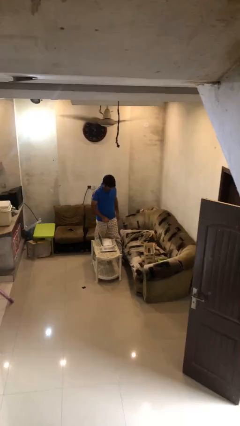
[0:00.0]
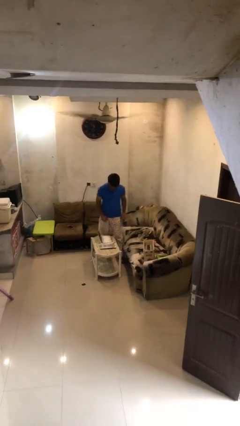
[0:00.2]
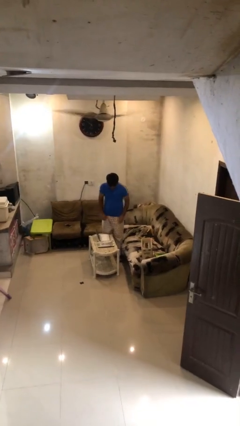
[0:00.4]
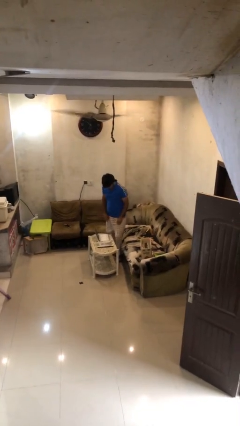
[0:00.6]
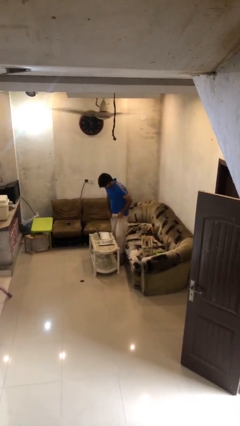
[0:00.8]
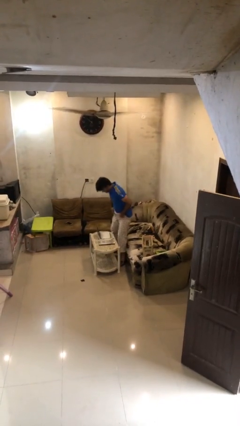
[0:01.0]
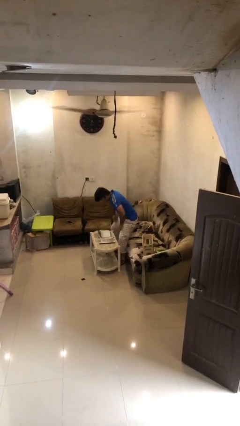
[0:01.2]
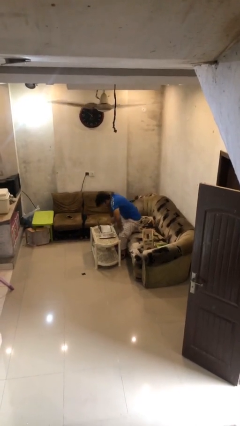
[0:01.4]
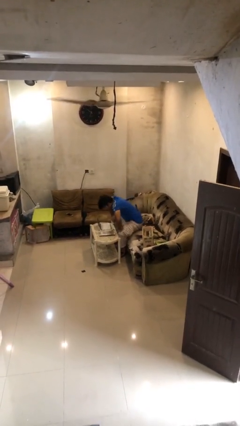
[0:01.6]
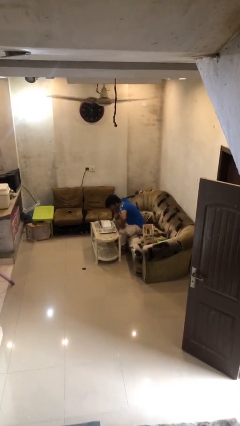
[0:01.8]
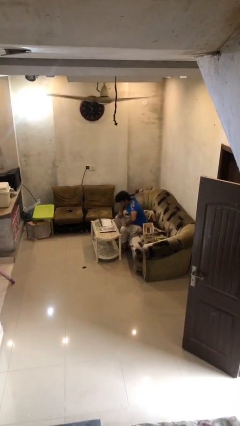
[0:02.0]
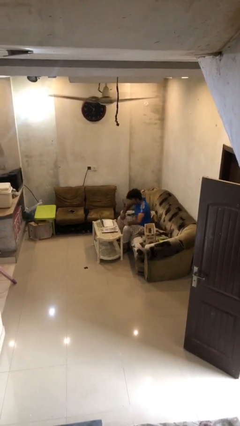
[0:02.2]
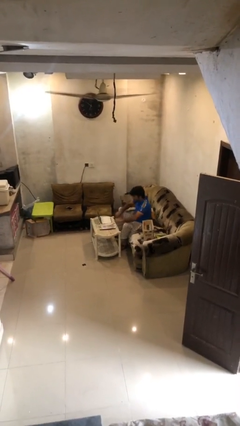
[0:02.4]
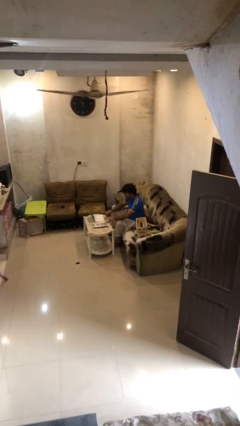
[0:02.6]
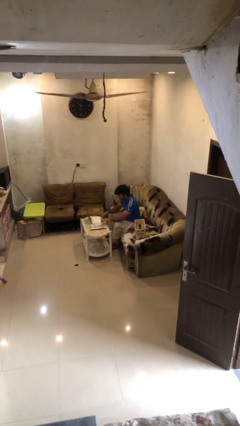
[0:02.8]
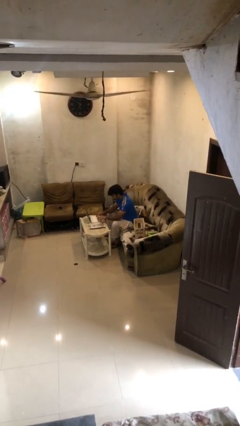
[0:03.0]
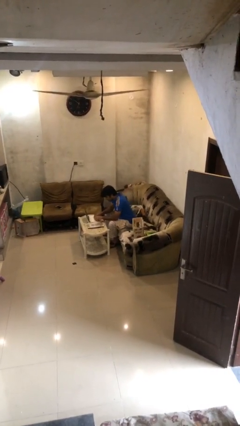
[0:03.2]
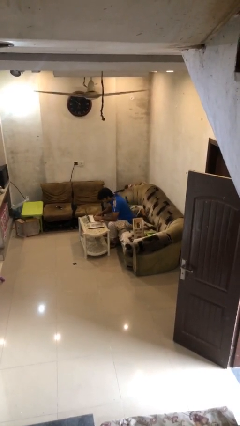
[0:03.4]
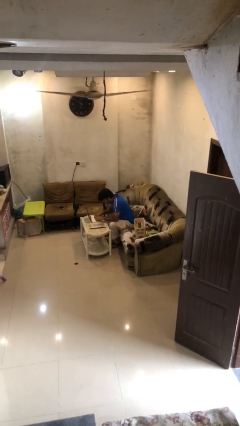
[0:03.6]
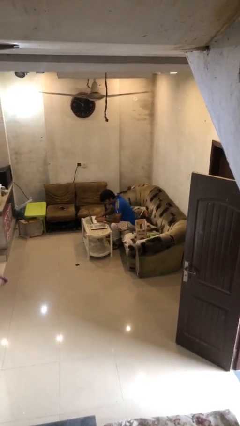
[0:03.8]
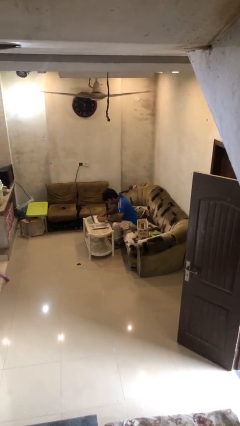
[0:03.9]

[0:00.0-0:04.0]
person sits down

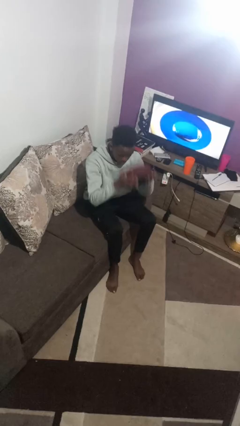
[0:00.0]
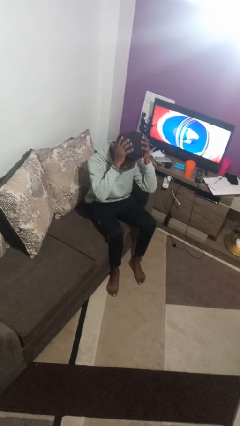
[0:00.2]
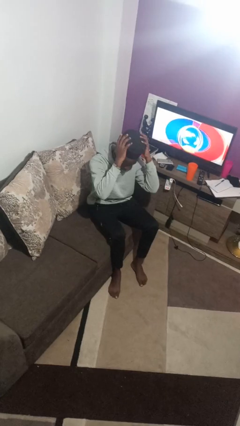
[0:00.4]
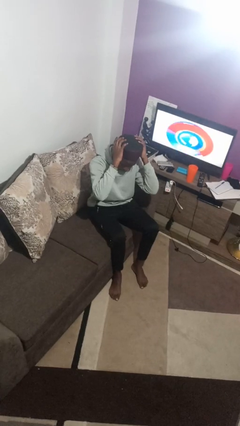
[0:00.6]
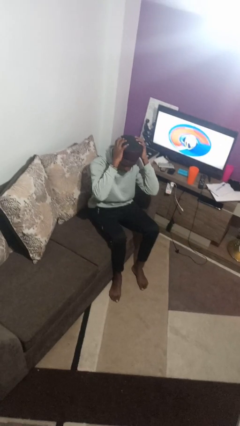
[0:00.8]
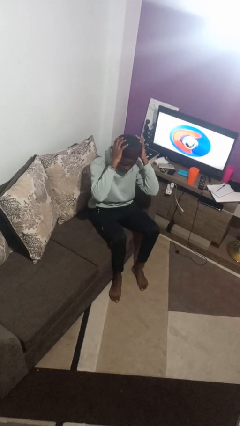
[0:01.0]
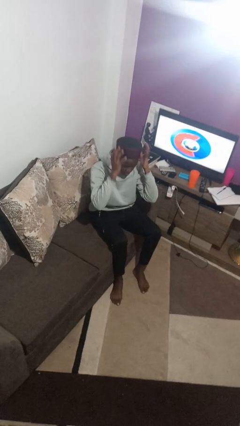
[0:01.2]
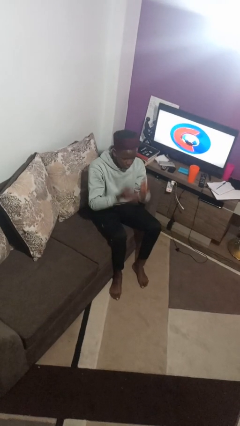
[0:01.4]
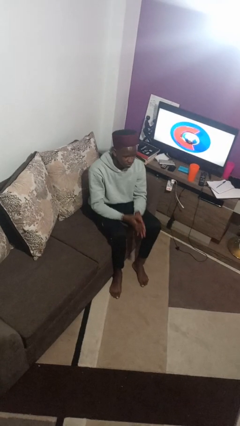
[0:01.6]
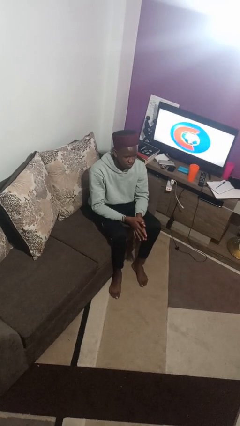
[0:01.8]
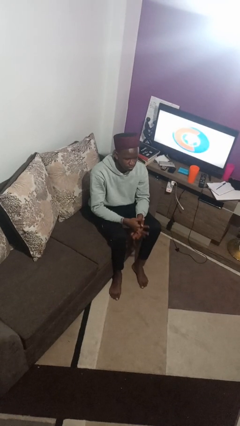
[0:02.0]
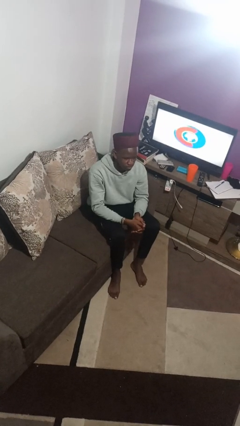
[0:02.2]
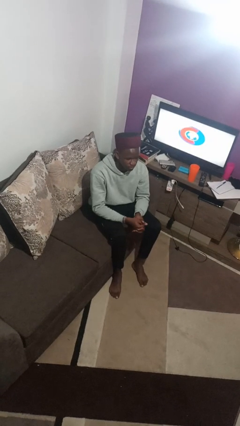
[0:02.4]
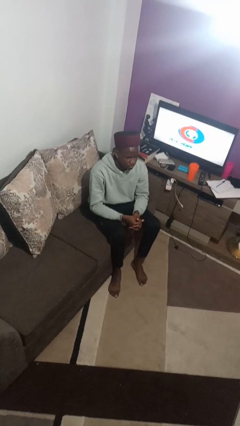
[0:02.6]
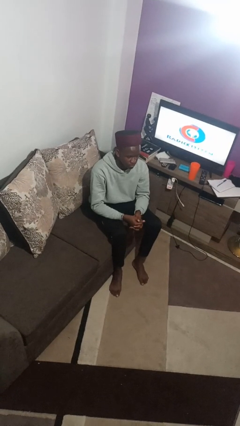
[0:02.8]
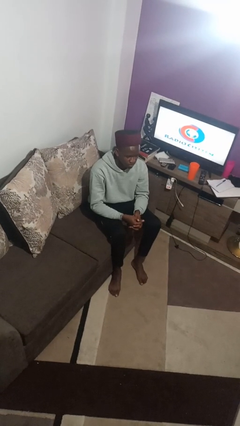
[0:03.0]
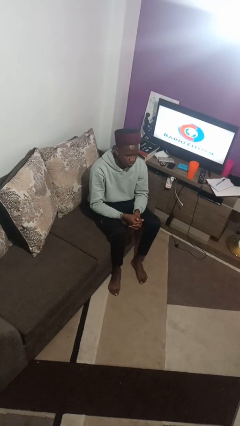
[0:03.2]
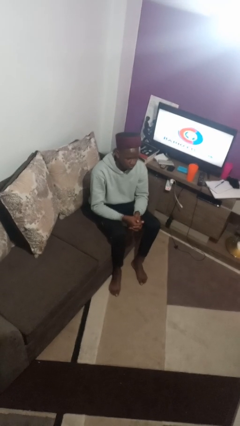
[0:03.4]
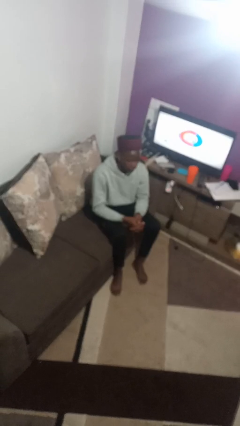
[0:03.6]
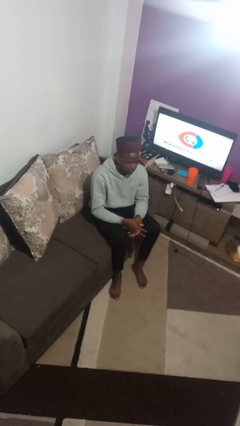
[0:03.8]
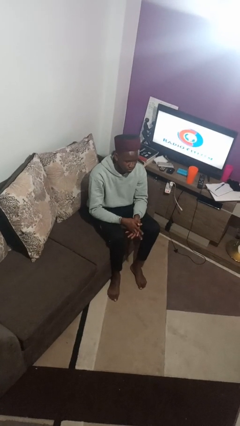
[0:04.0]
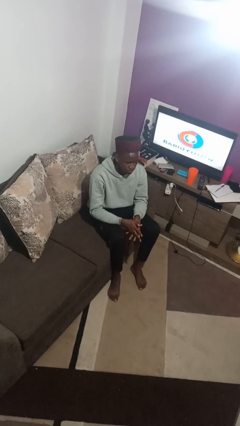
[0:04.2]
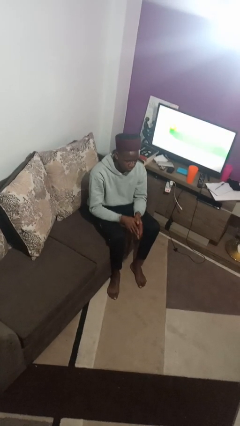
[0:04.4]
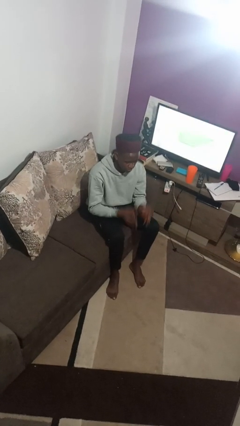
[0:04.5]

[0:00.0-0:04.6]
person puts on hat

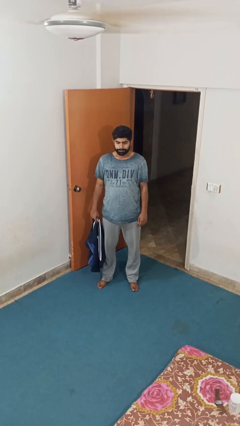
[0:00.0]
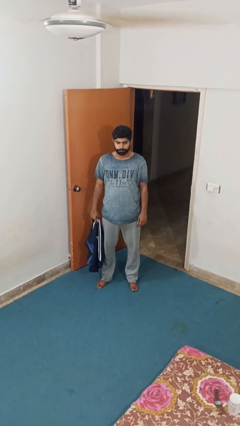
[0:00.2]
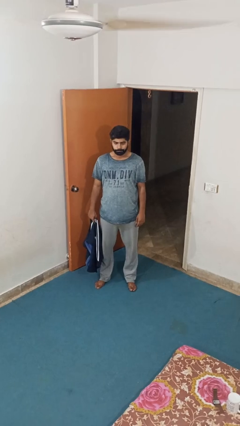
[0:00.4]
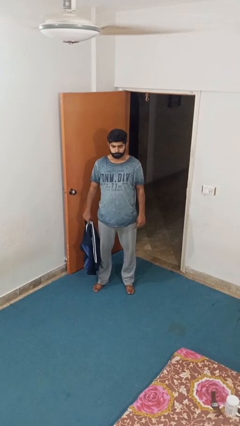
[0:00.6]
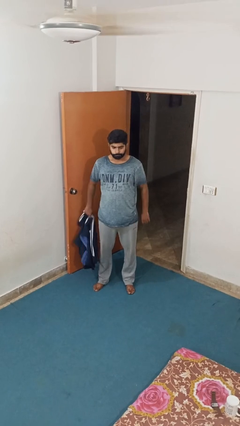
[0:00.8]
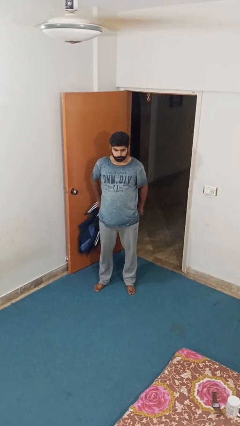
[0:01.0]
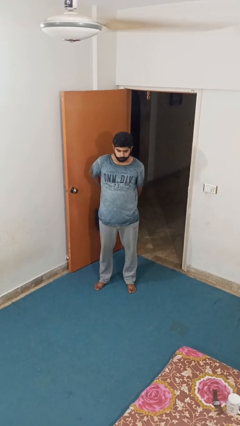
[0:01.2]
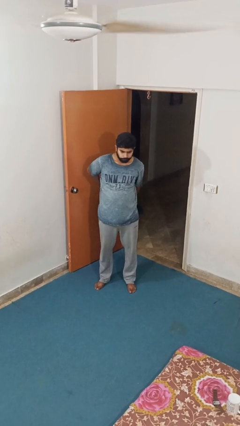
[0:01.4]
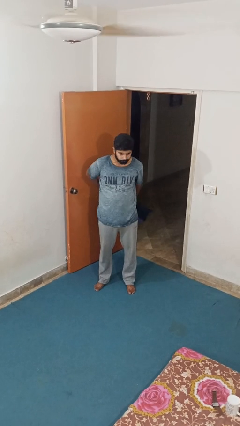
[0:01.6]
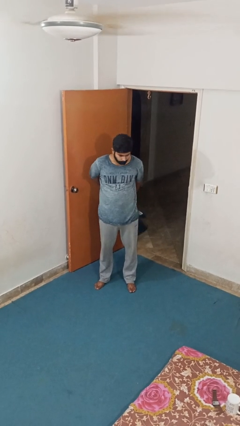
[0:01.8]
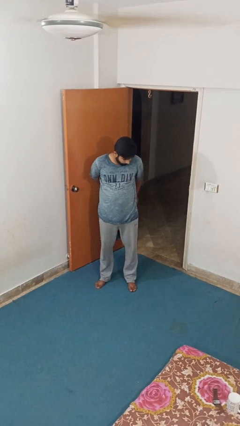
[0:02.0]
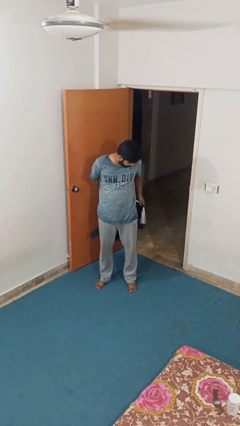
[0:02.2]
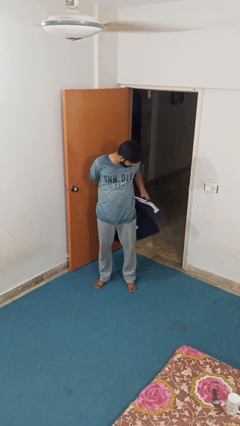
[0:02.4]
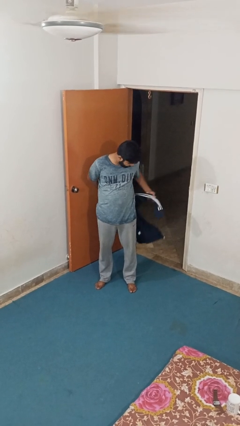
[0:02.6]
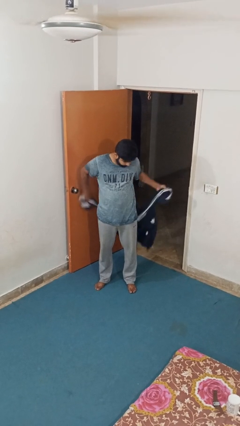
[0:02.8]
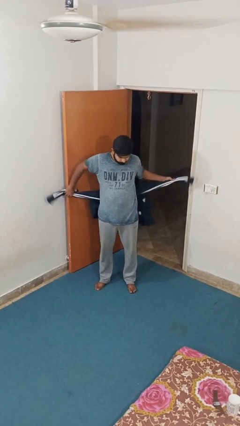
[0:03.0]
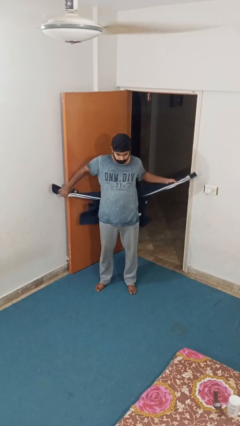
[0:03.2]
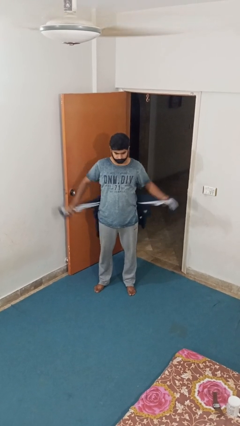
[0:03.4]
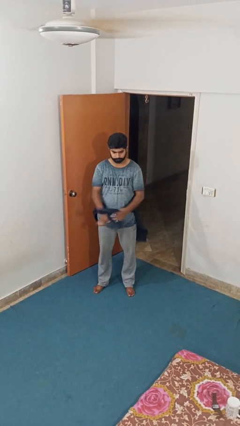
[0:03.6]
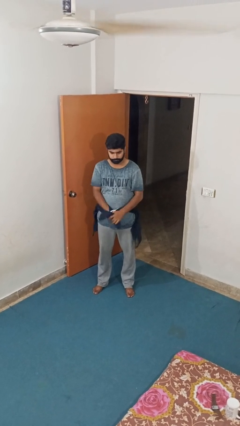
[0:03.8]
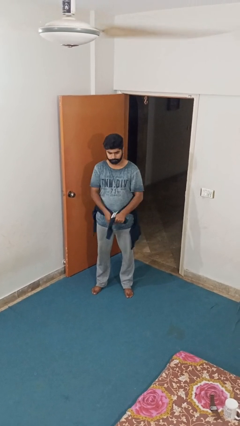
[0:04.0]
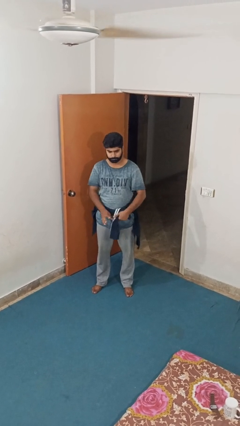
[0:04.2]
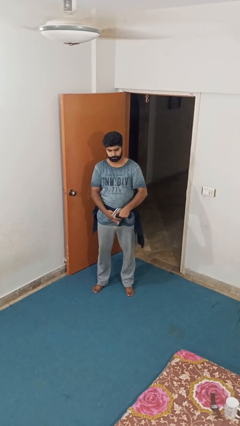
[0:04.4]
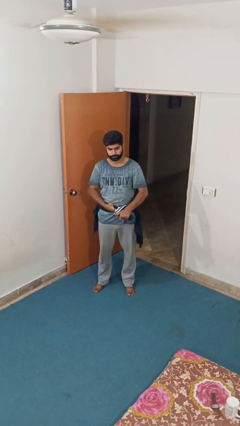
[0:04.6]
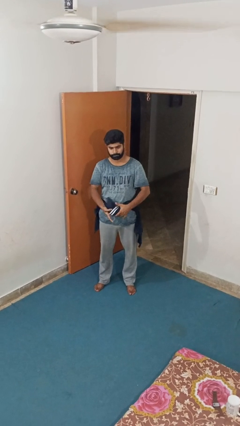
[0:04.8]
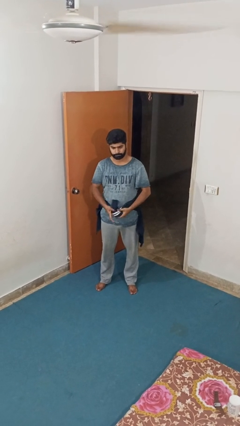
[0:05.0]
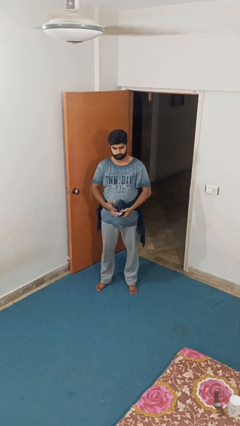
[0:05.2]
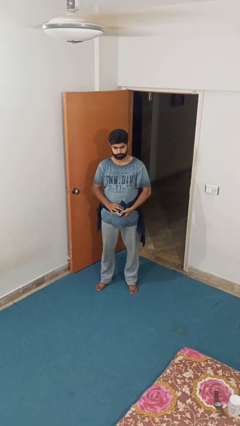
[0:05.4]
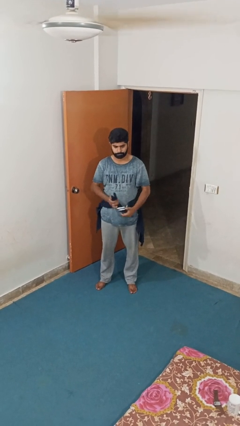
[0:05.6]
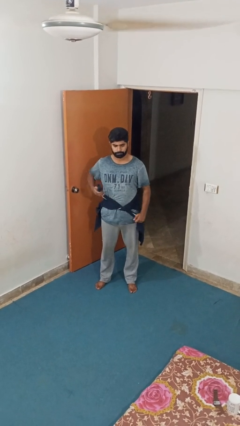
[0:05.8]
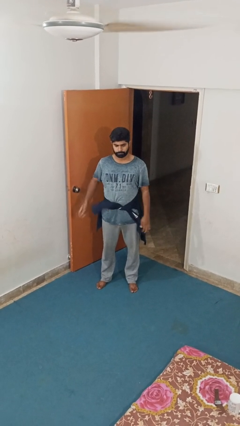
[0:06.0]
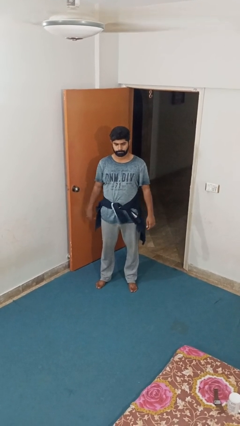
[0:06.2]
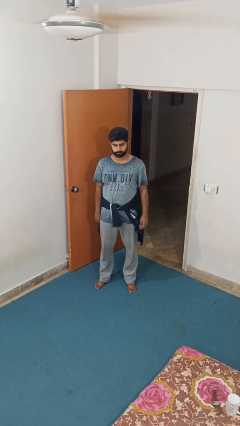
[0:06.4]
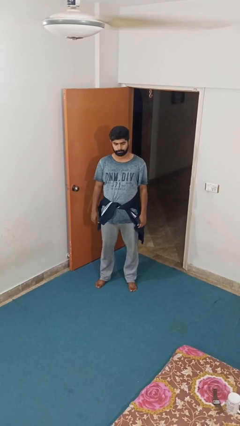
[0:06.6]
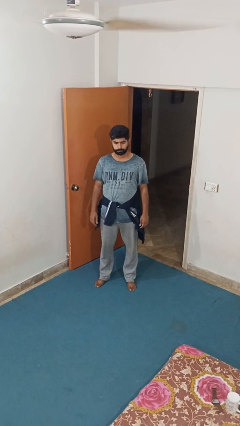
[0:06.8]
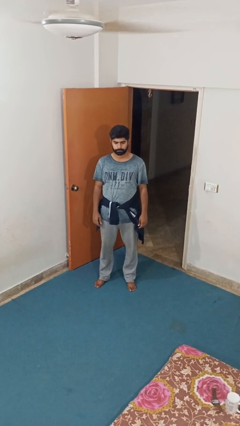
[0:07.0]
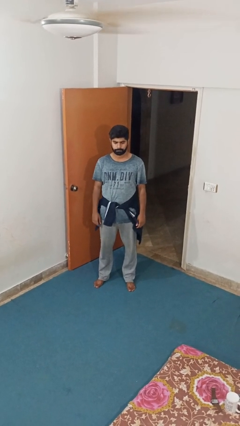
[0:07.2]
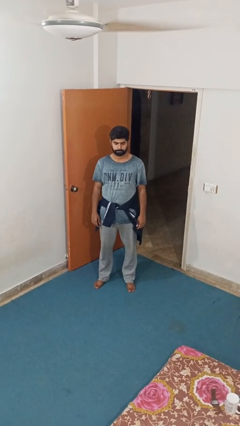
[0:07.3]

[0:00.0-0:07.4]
person ties jacket around waist

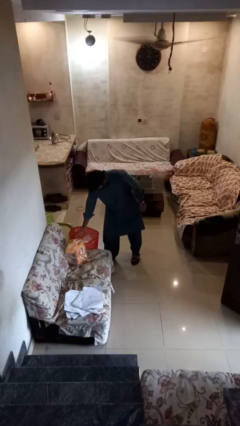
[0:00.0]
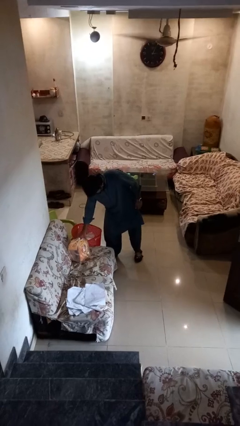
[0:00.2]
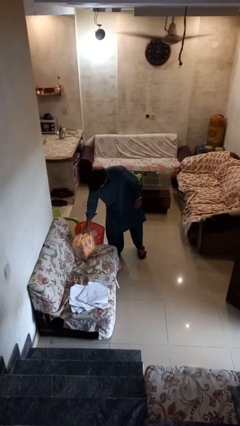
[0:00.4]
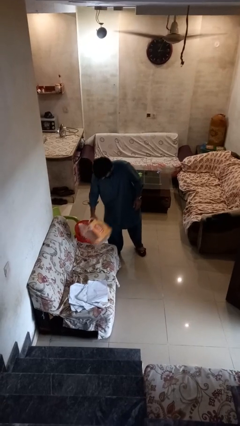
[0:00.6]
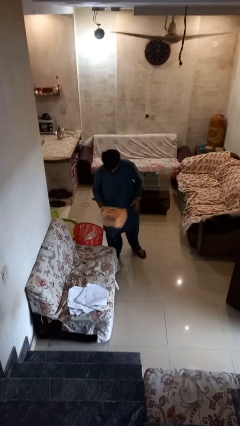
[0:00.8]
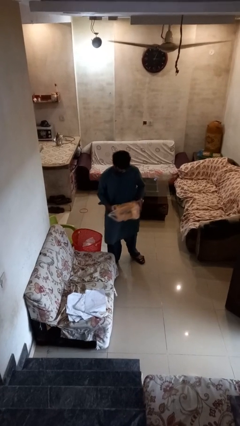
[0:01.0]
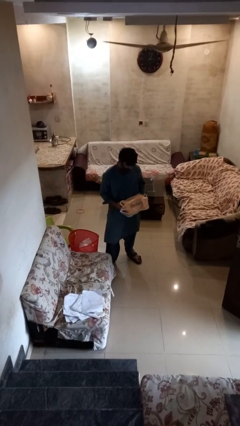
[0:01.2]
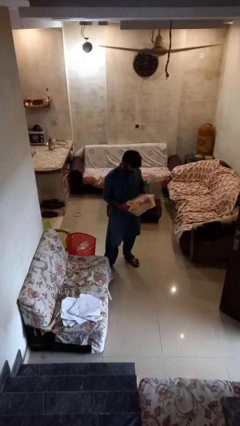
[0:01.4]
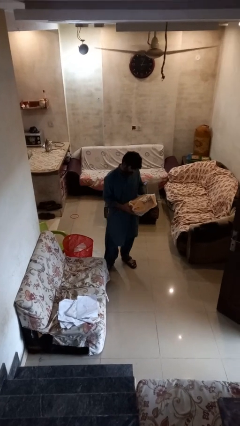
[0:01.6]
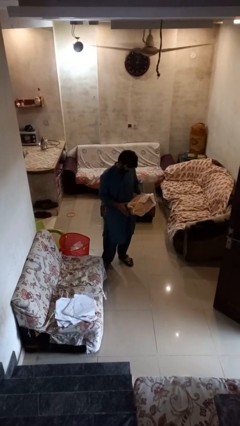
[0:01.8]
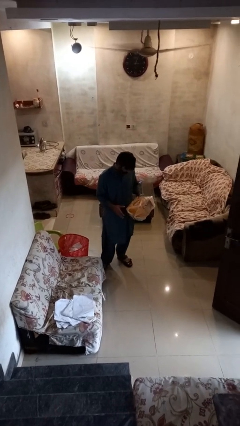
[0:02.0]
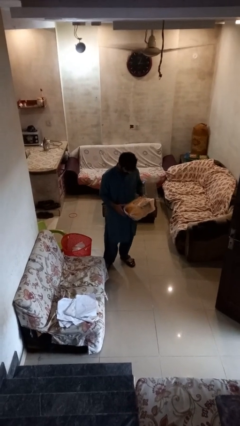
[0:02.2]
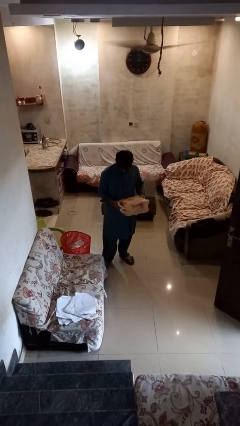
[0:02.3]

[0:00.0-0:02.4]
person picks up object from couch
